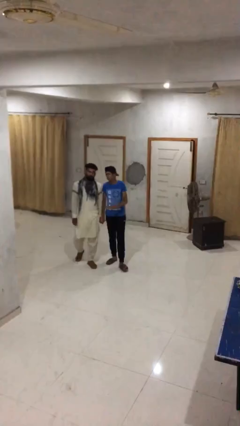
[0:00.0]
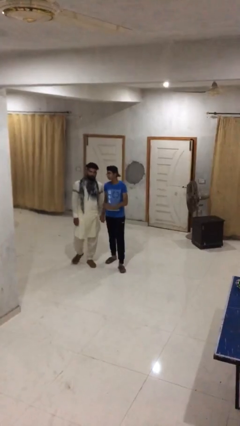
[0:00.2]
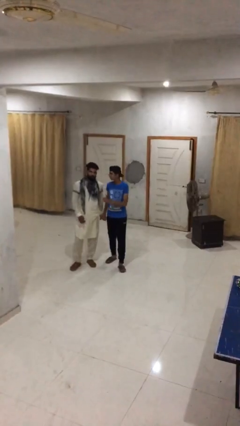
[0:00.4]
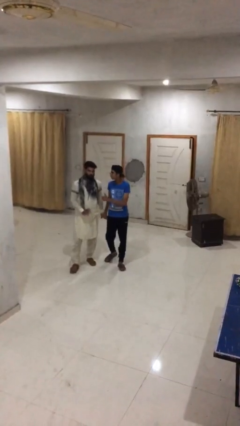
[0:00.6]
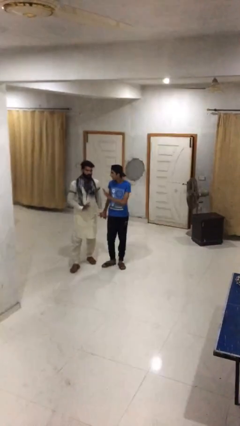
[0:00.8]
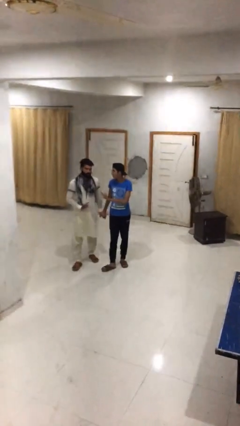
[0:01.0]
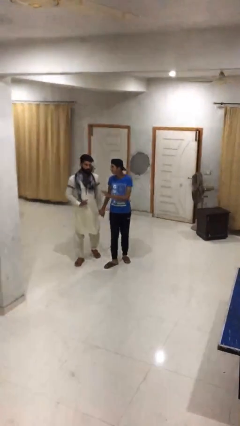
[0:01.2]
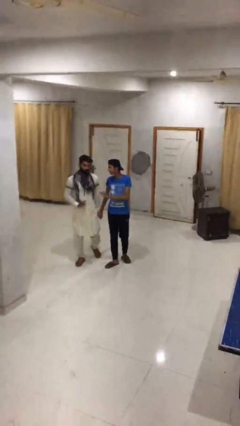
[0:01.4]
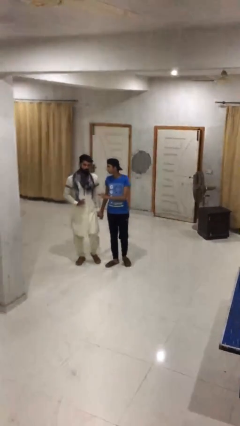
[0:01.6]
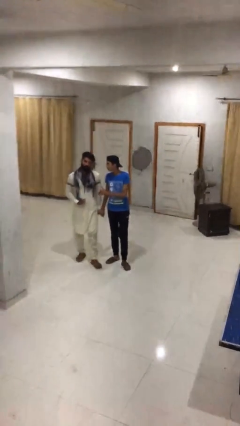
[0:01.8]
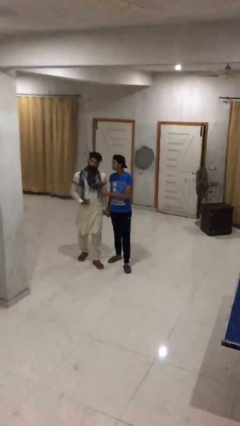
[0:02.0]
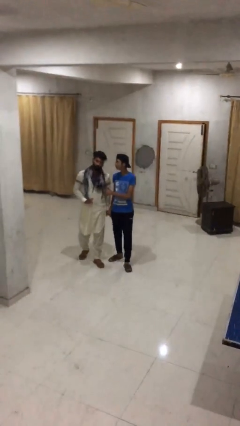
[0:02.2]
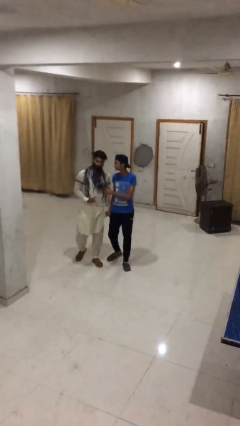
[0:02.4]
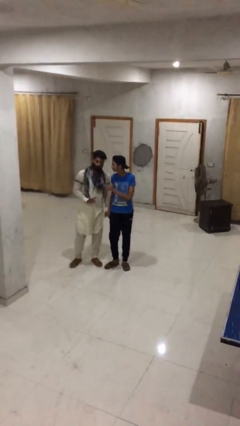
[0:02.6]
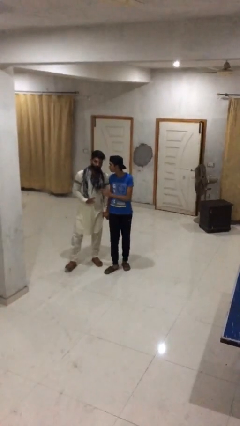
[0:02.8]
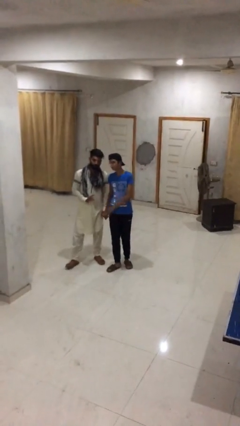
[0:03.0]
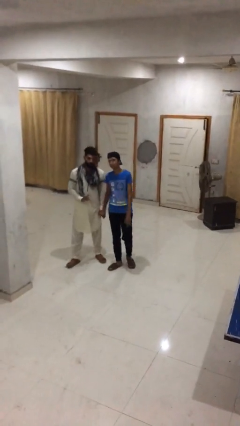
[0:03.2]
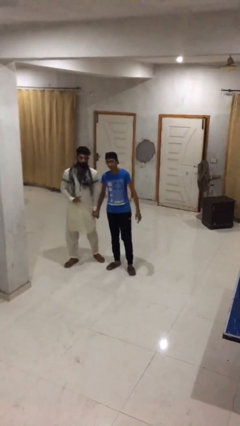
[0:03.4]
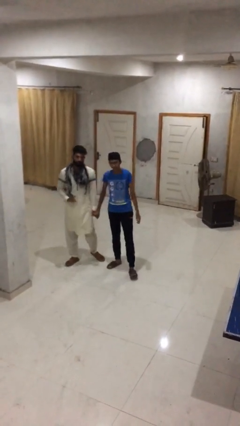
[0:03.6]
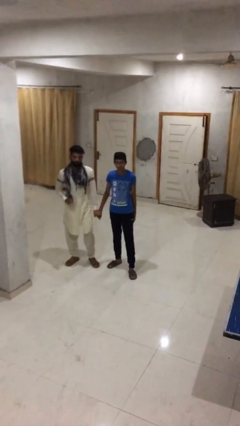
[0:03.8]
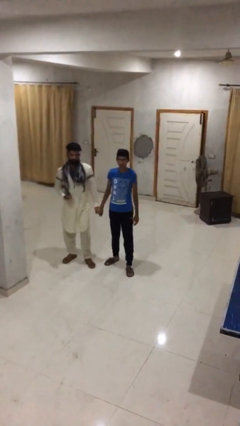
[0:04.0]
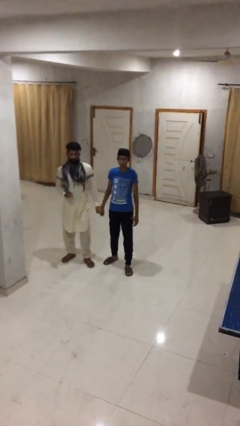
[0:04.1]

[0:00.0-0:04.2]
person holds hand

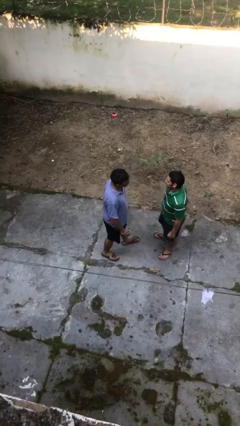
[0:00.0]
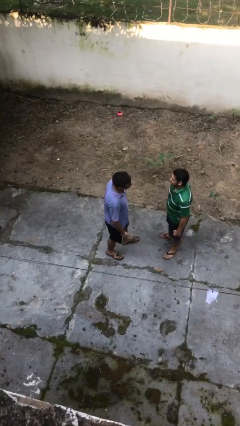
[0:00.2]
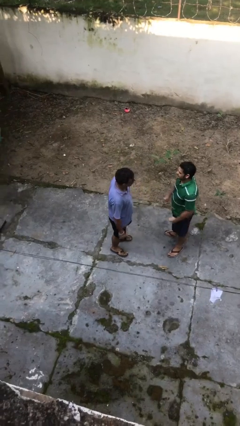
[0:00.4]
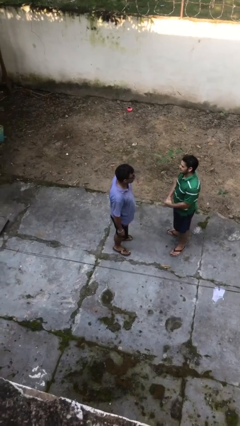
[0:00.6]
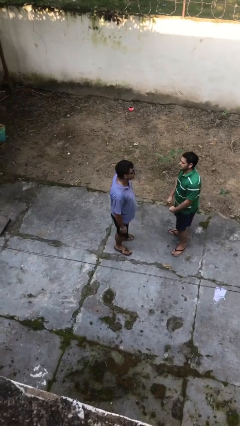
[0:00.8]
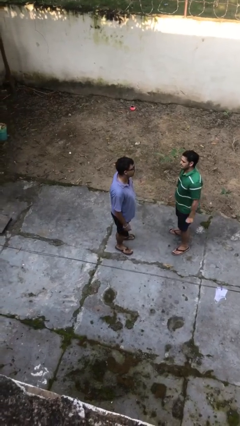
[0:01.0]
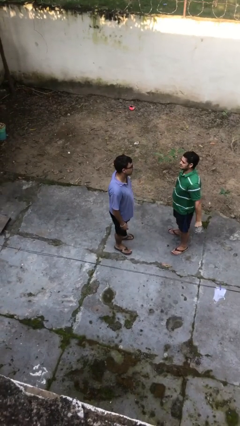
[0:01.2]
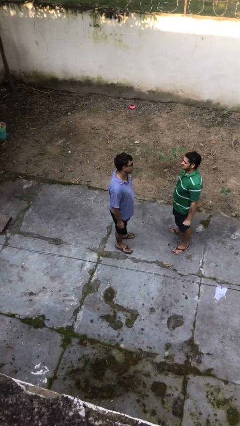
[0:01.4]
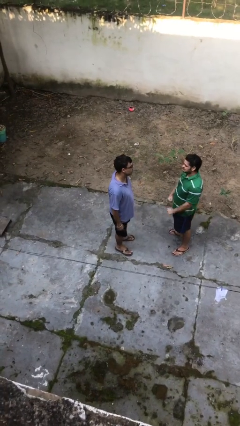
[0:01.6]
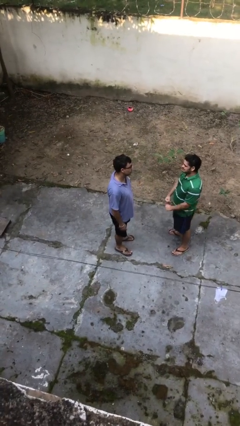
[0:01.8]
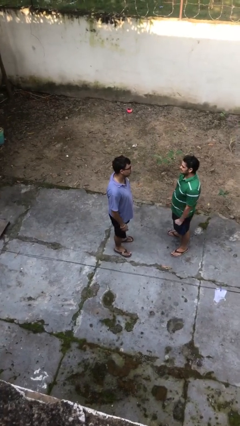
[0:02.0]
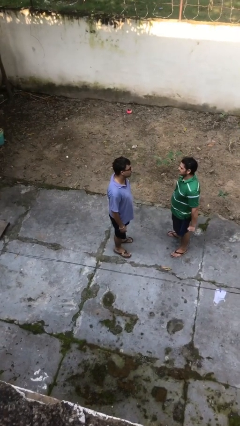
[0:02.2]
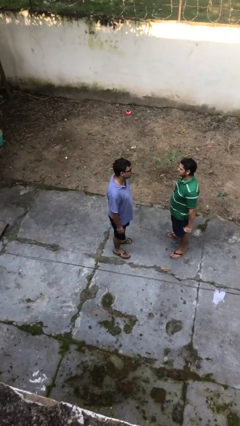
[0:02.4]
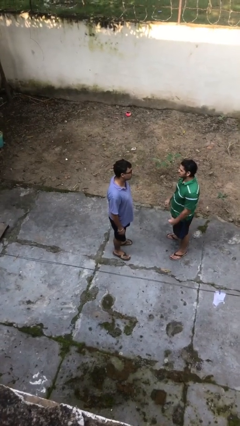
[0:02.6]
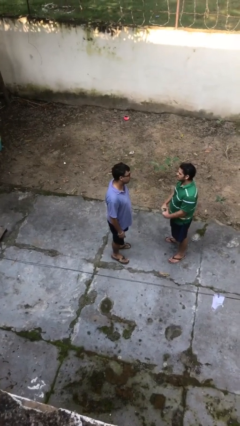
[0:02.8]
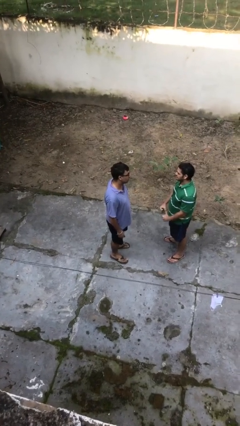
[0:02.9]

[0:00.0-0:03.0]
person talks to person

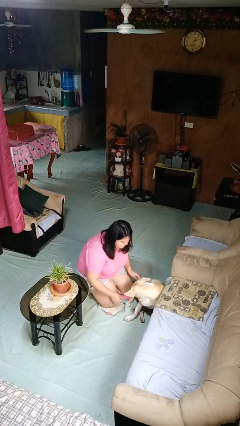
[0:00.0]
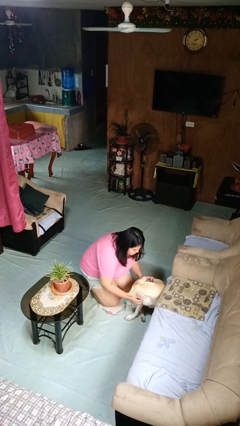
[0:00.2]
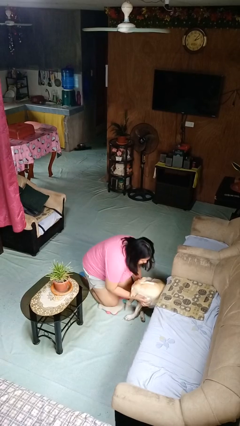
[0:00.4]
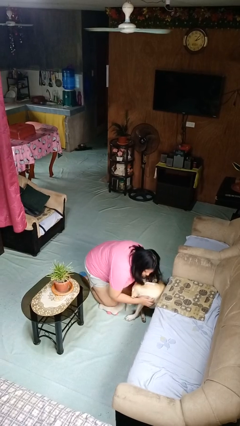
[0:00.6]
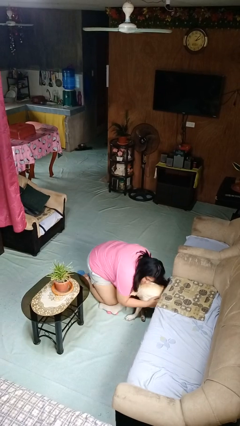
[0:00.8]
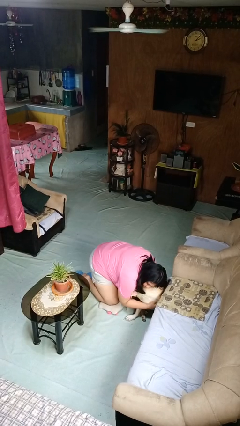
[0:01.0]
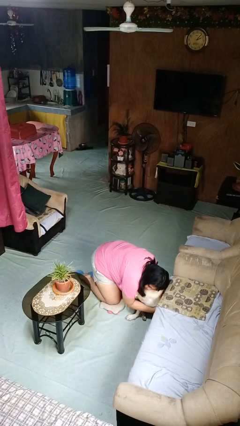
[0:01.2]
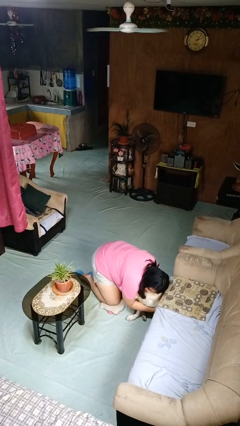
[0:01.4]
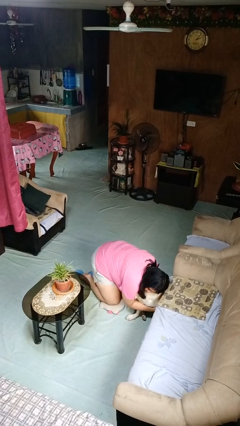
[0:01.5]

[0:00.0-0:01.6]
person hugs dog

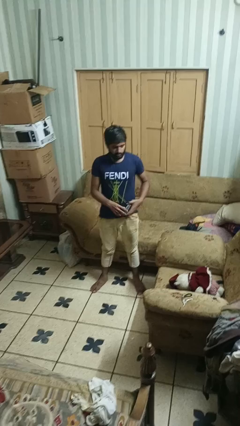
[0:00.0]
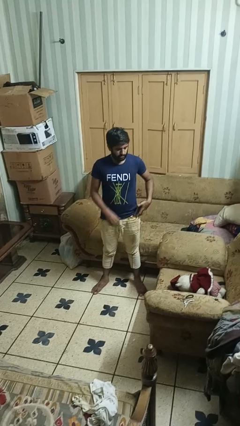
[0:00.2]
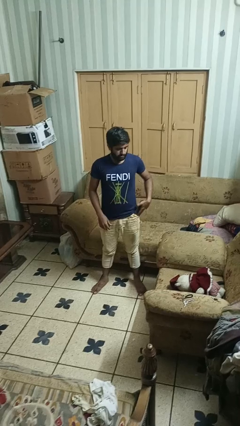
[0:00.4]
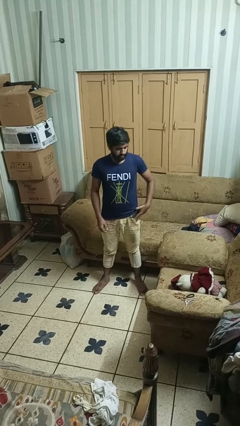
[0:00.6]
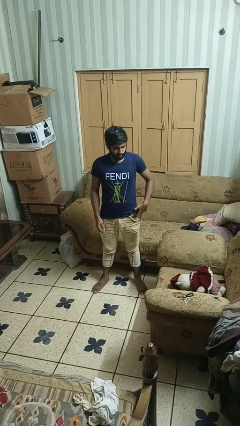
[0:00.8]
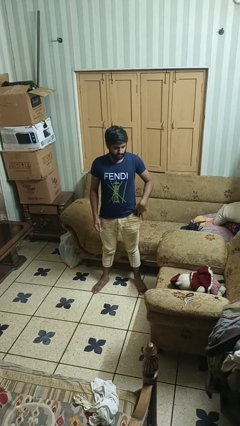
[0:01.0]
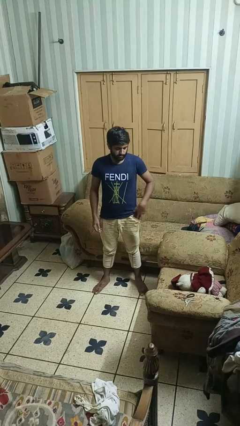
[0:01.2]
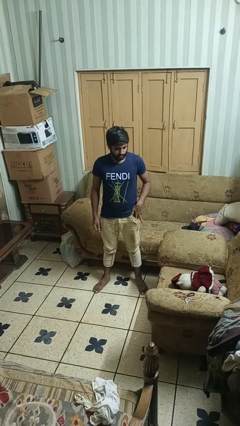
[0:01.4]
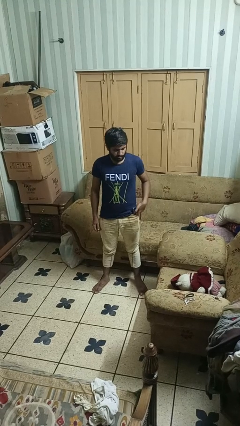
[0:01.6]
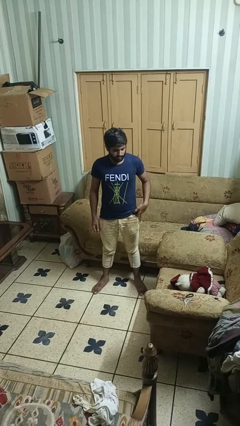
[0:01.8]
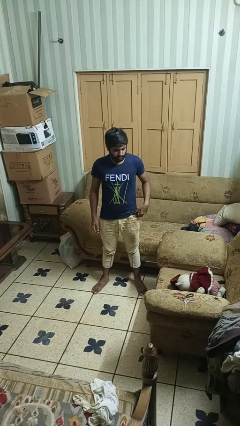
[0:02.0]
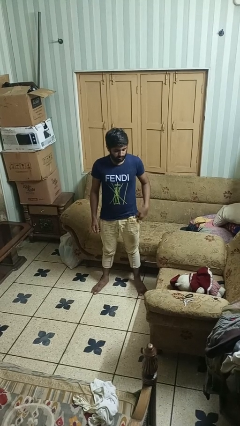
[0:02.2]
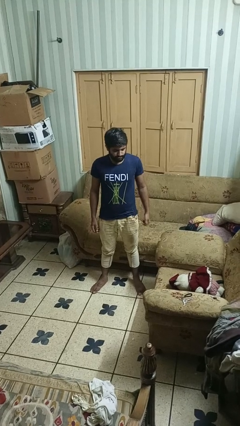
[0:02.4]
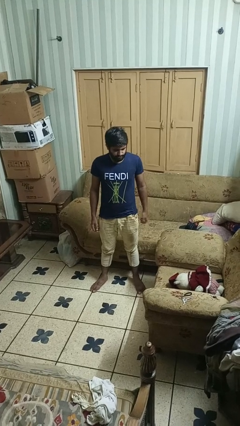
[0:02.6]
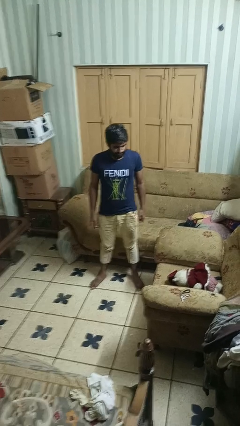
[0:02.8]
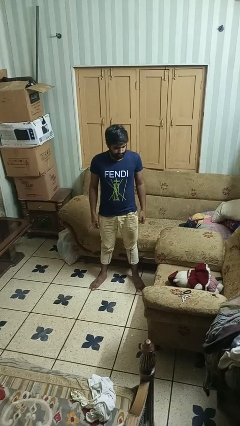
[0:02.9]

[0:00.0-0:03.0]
person puts phone into pocket

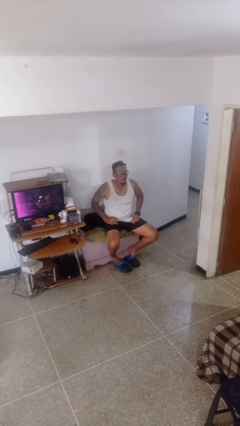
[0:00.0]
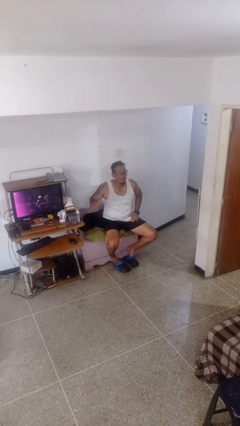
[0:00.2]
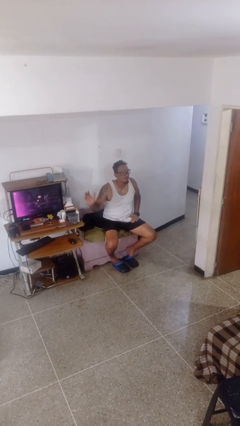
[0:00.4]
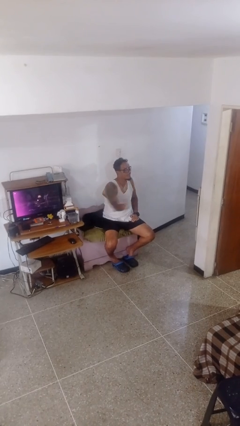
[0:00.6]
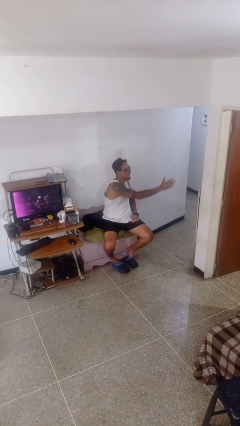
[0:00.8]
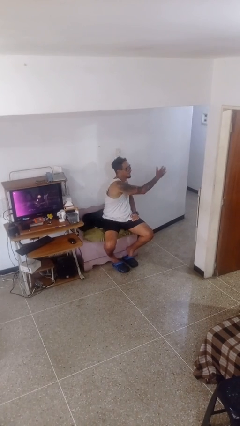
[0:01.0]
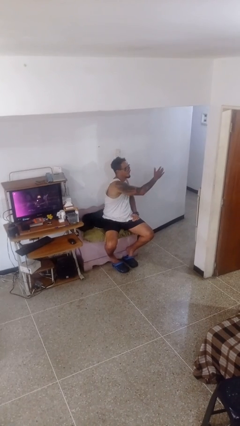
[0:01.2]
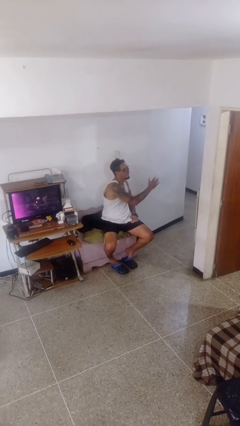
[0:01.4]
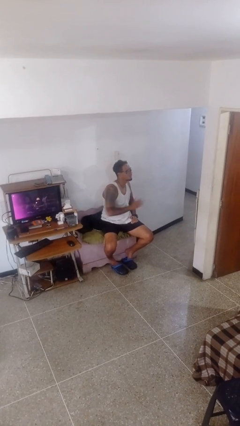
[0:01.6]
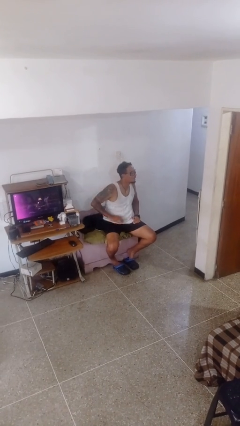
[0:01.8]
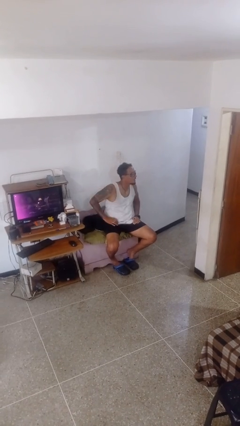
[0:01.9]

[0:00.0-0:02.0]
person gestures swipe left

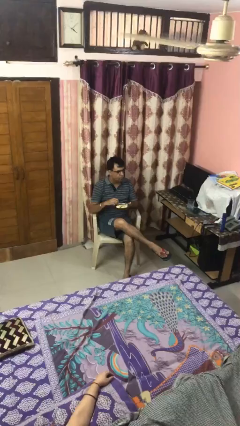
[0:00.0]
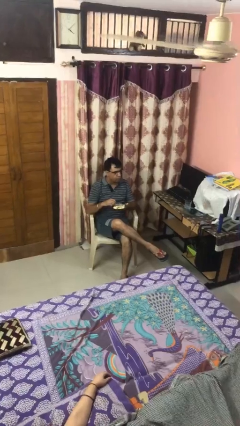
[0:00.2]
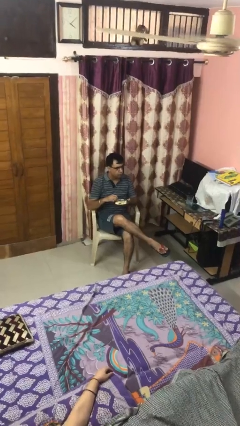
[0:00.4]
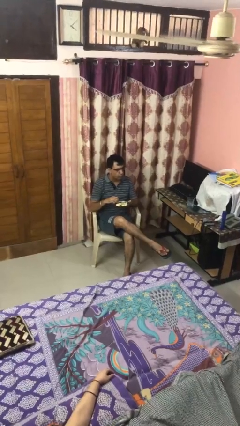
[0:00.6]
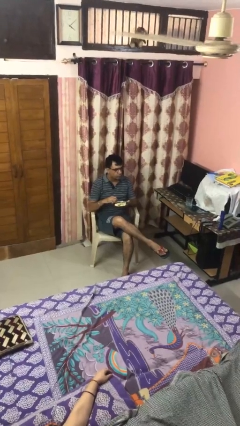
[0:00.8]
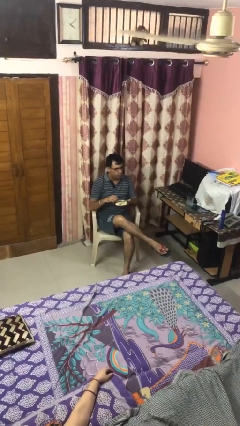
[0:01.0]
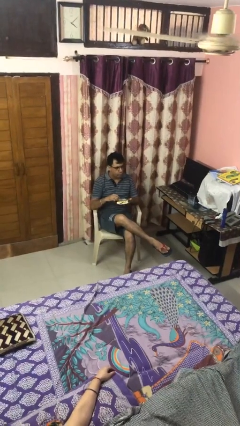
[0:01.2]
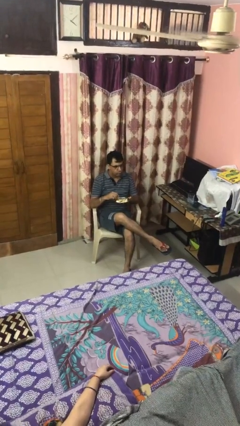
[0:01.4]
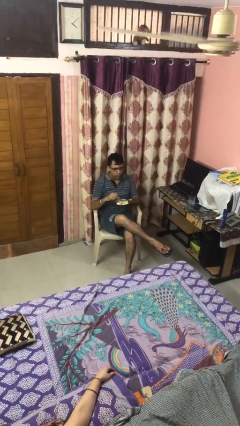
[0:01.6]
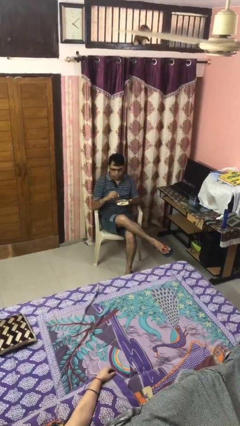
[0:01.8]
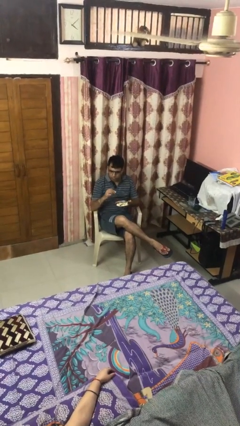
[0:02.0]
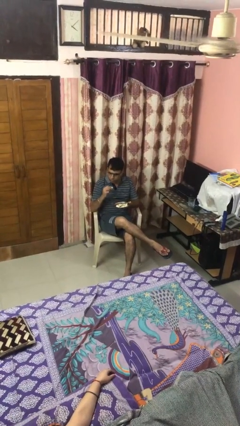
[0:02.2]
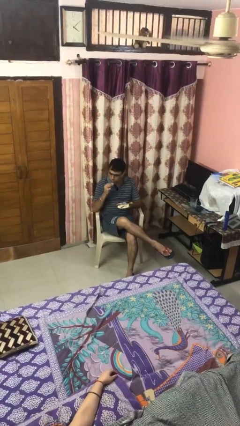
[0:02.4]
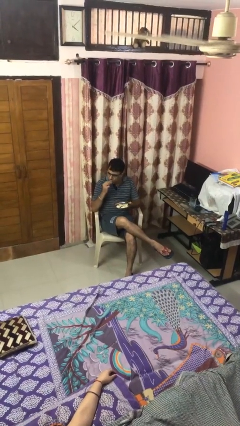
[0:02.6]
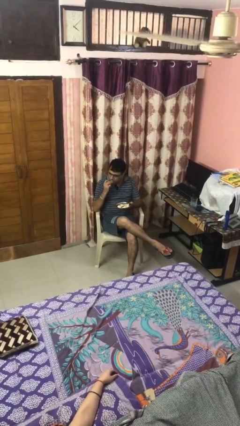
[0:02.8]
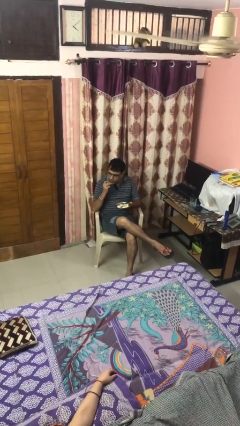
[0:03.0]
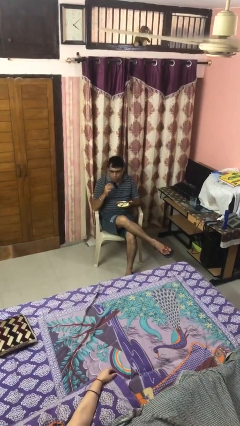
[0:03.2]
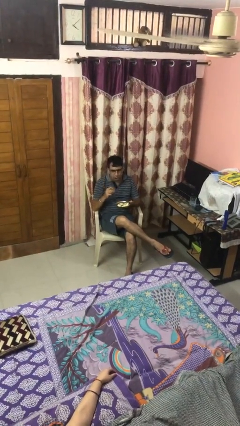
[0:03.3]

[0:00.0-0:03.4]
person eats with hands

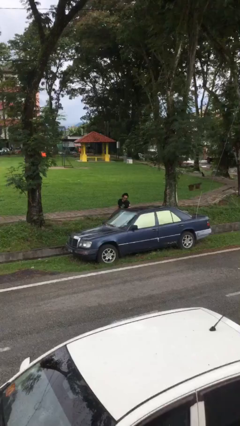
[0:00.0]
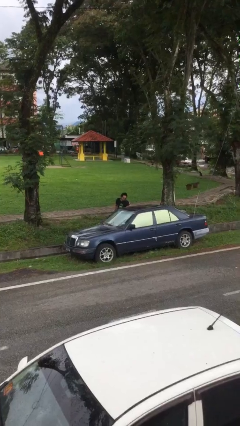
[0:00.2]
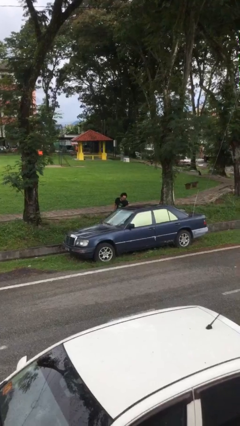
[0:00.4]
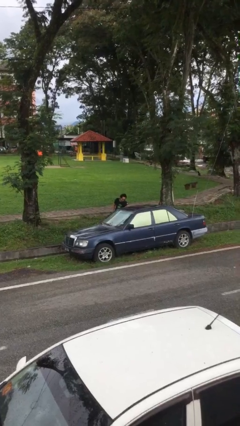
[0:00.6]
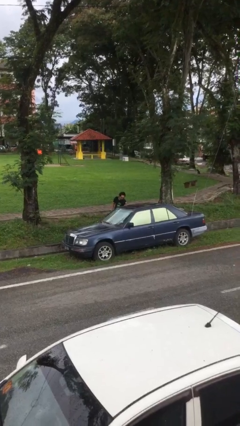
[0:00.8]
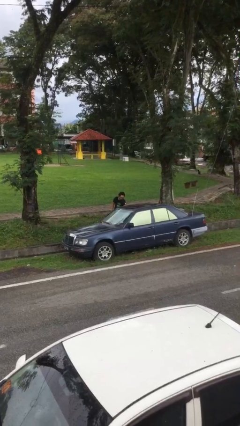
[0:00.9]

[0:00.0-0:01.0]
person closes car door
